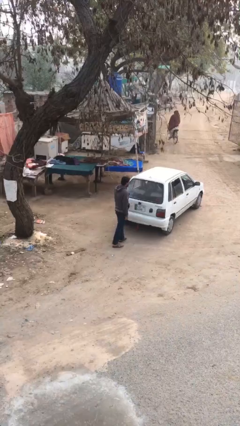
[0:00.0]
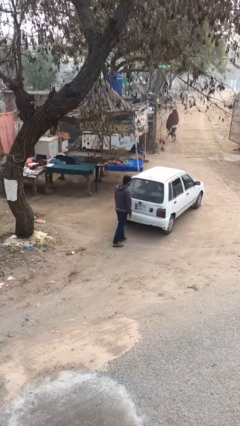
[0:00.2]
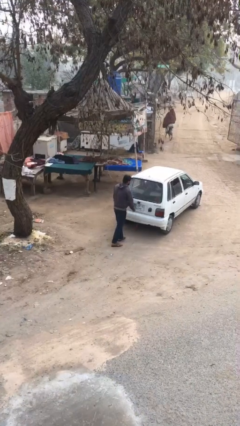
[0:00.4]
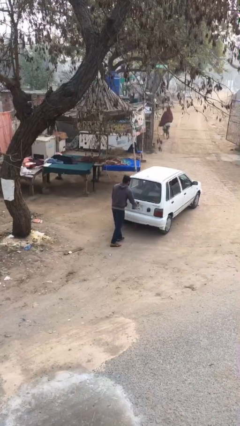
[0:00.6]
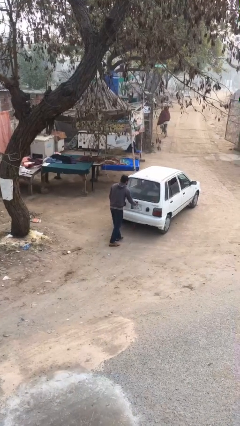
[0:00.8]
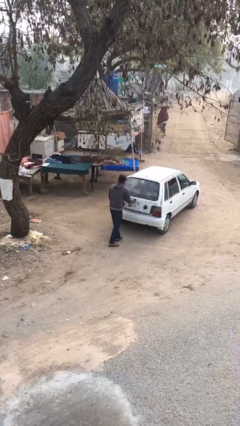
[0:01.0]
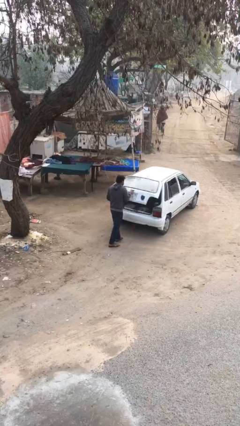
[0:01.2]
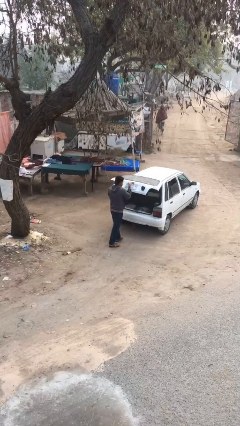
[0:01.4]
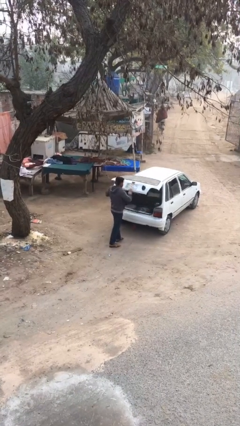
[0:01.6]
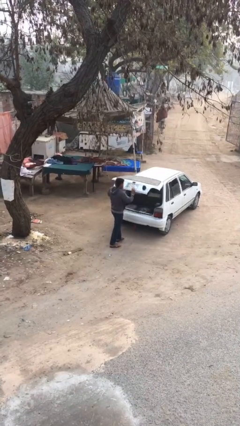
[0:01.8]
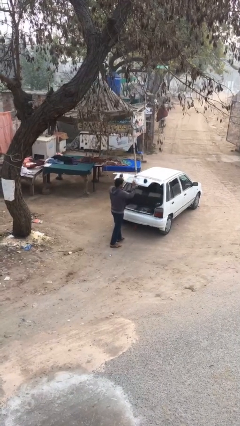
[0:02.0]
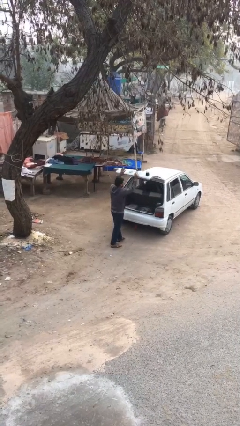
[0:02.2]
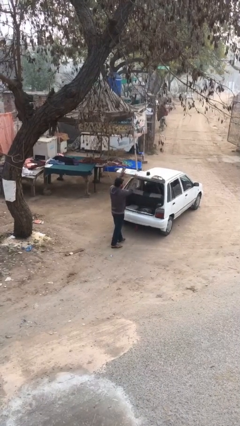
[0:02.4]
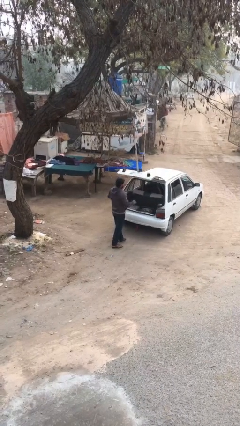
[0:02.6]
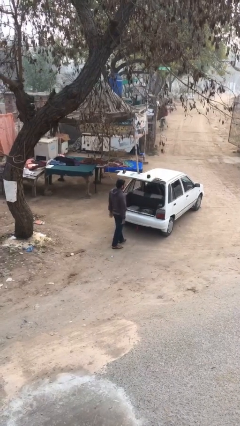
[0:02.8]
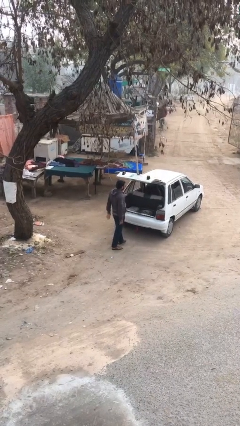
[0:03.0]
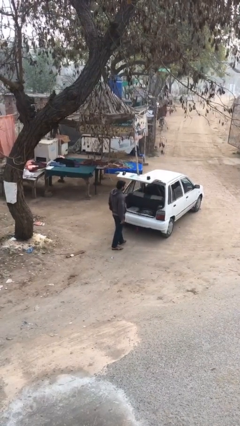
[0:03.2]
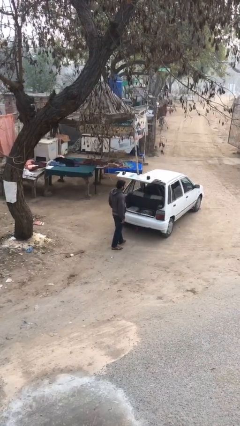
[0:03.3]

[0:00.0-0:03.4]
person opens car trunk

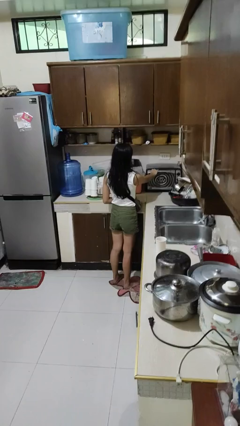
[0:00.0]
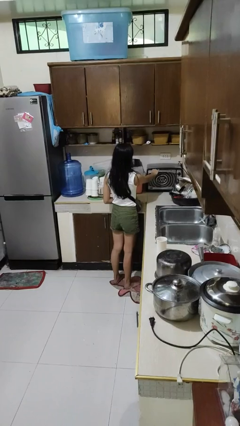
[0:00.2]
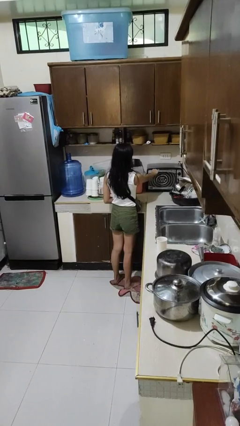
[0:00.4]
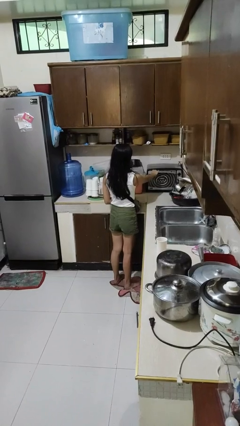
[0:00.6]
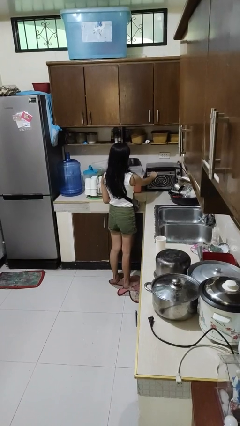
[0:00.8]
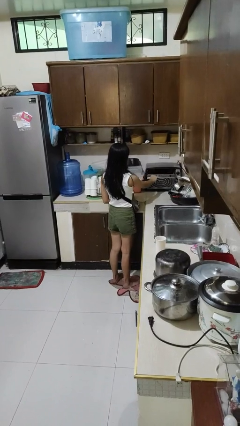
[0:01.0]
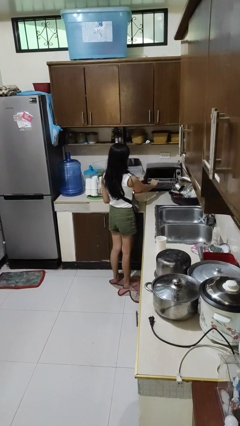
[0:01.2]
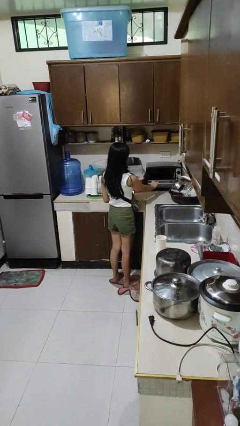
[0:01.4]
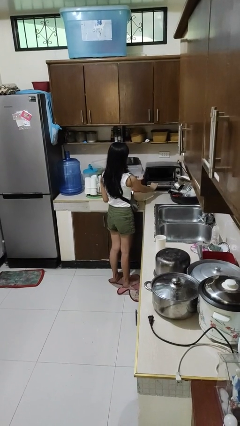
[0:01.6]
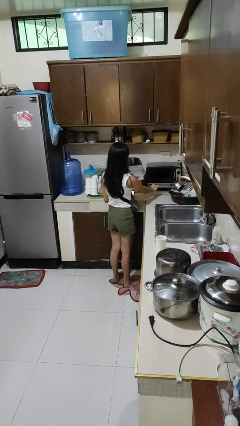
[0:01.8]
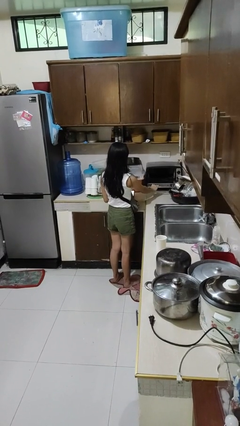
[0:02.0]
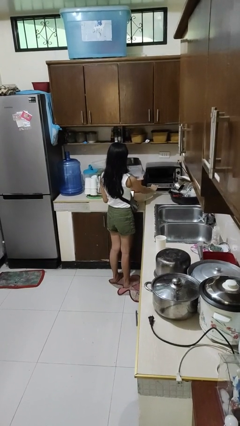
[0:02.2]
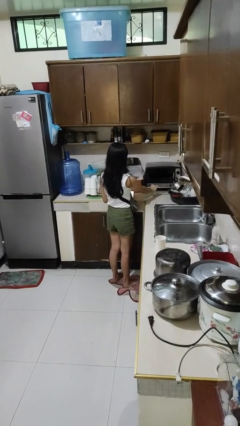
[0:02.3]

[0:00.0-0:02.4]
person opens microwave

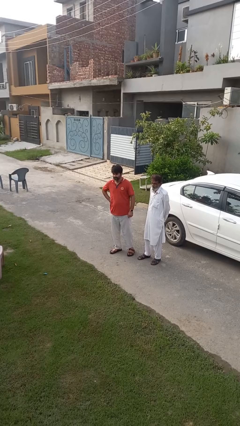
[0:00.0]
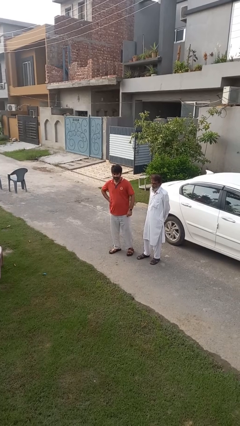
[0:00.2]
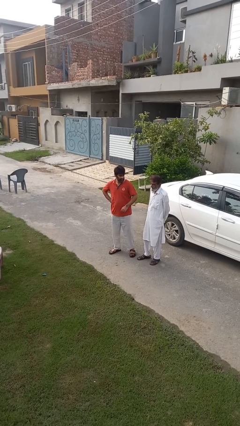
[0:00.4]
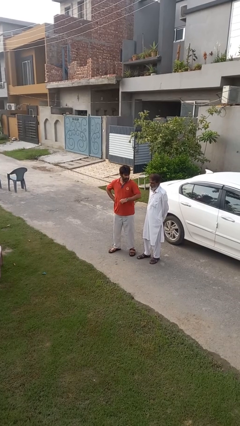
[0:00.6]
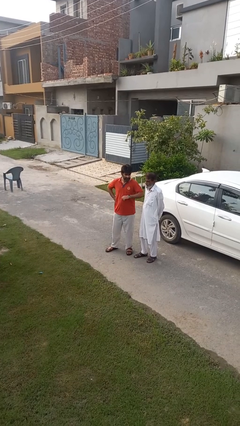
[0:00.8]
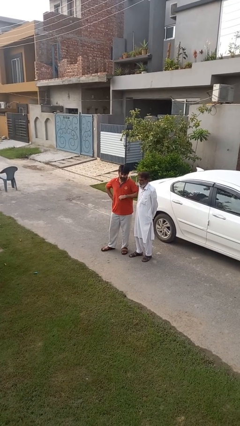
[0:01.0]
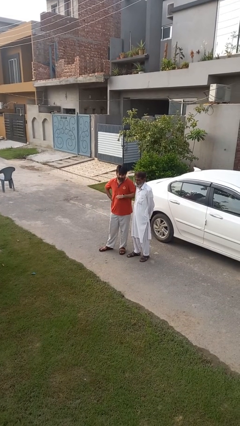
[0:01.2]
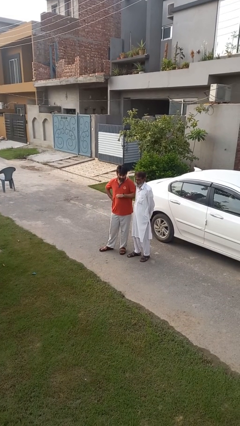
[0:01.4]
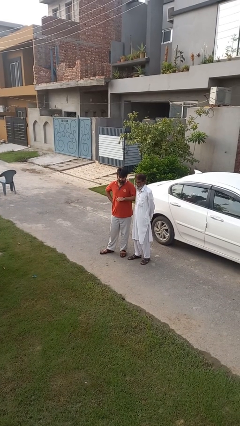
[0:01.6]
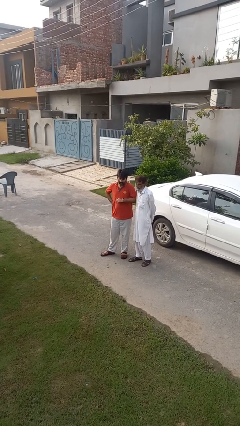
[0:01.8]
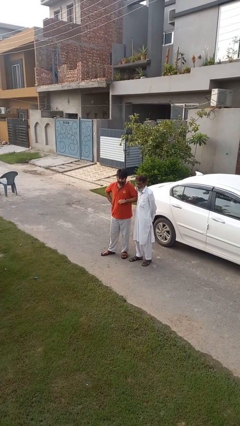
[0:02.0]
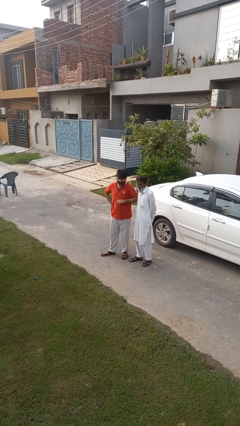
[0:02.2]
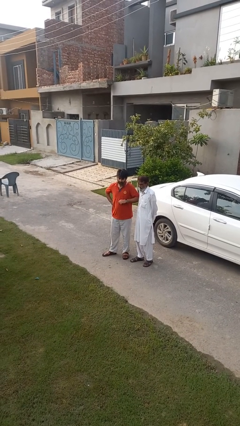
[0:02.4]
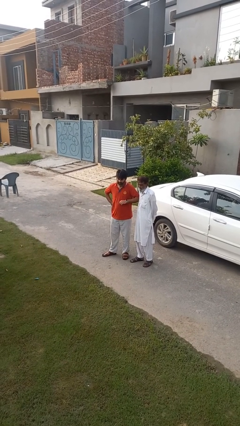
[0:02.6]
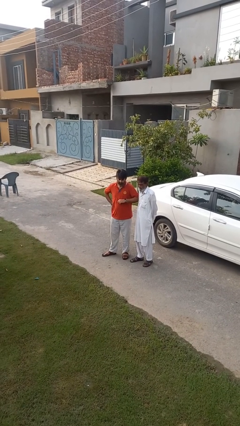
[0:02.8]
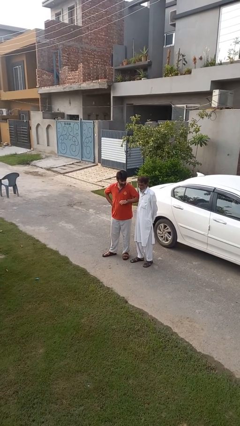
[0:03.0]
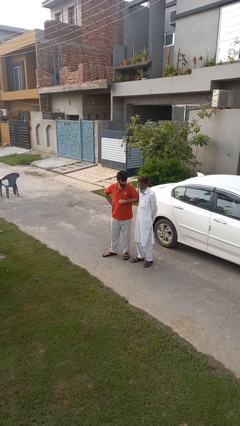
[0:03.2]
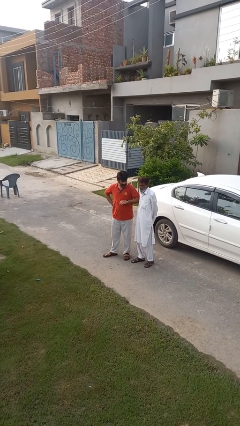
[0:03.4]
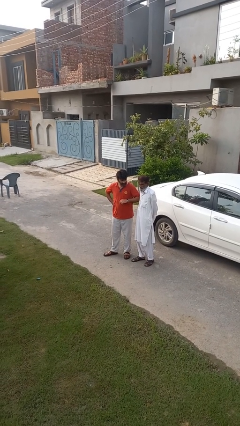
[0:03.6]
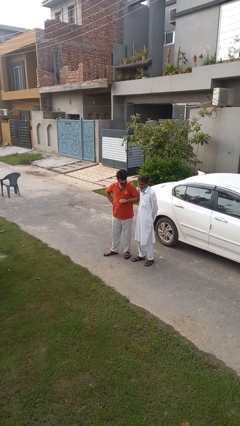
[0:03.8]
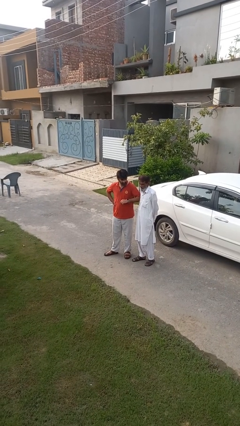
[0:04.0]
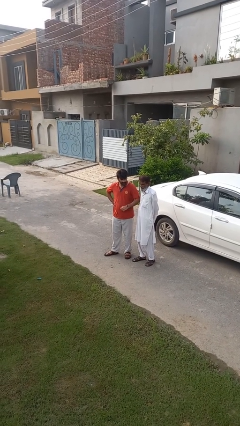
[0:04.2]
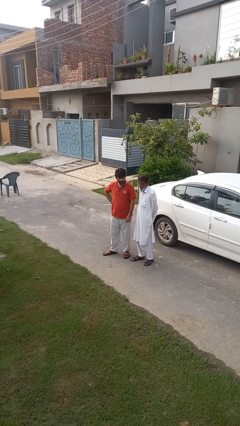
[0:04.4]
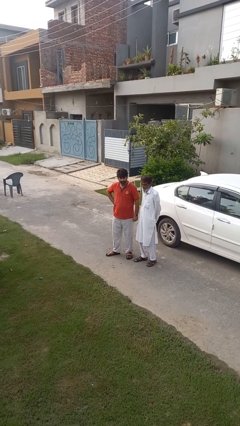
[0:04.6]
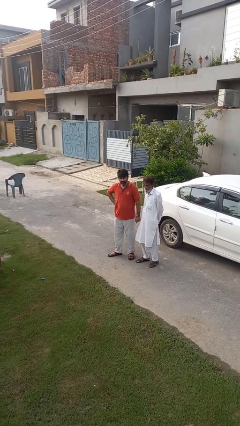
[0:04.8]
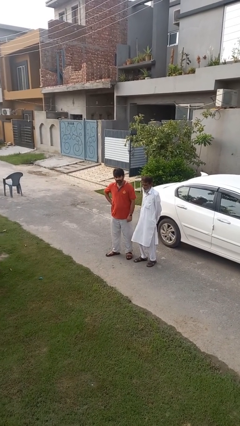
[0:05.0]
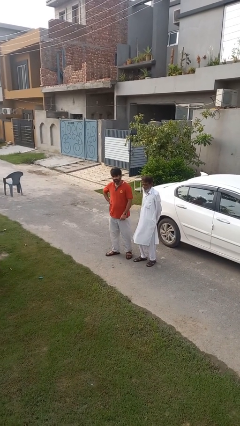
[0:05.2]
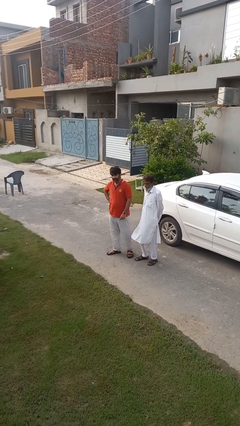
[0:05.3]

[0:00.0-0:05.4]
person nudges person with elbow

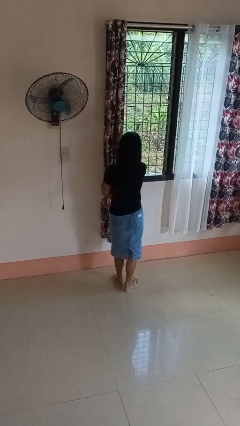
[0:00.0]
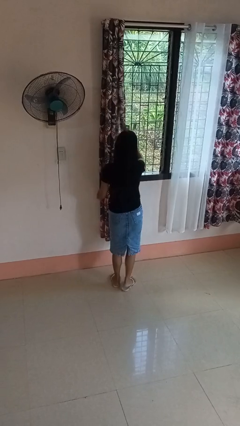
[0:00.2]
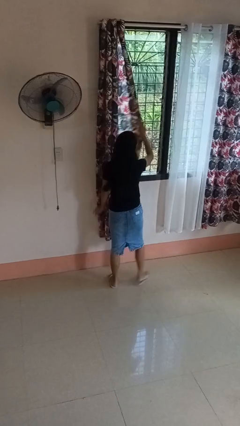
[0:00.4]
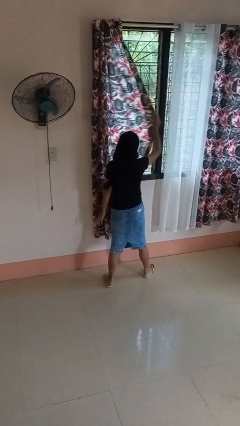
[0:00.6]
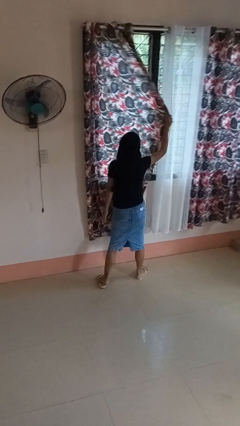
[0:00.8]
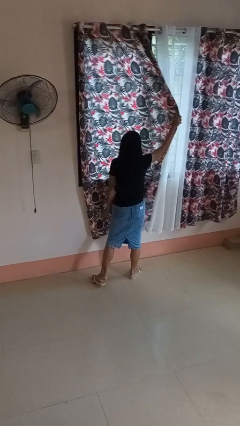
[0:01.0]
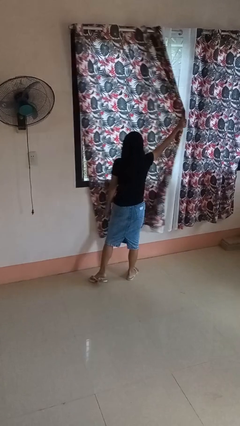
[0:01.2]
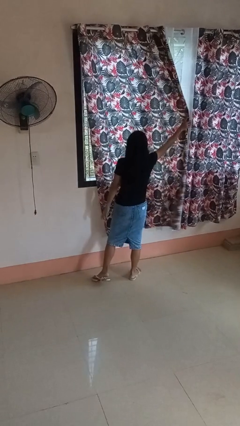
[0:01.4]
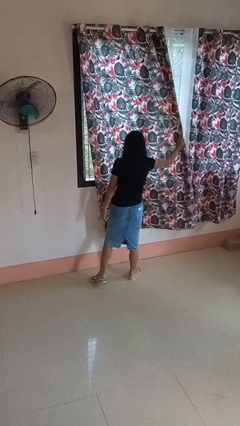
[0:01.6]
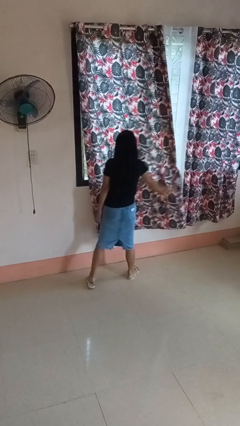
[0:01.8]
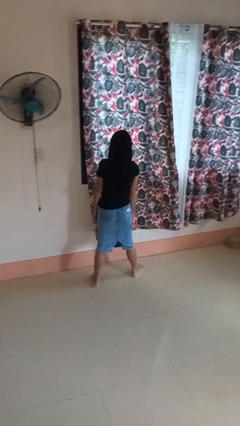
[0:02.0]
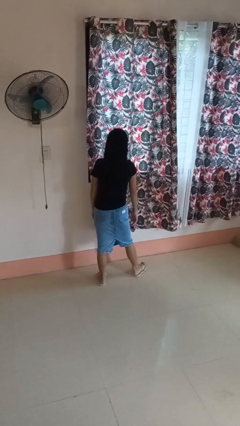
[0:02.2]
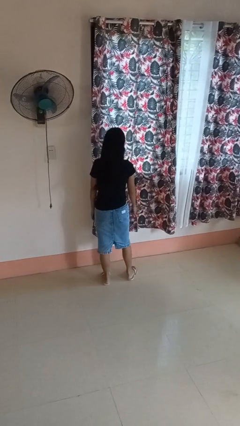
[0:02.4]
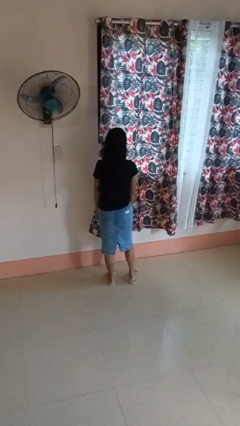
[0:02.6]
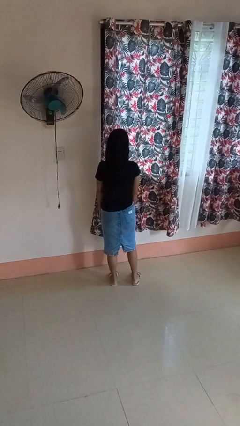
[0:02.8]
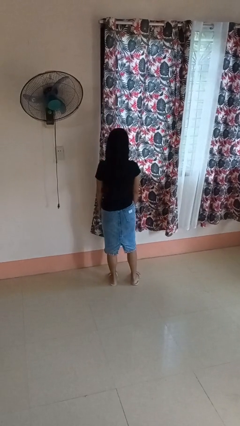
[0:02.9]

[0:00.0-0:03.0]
person closes curtains

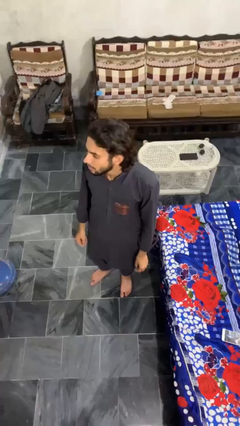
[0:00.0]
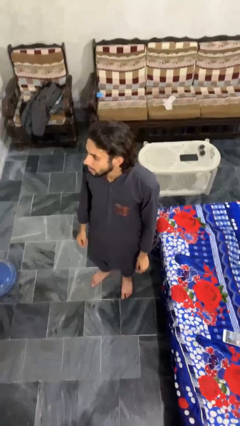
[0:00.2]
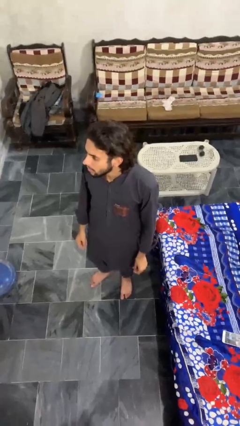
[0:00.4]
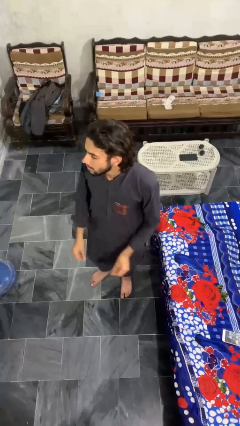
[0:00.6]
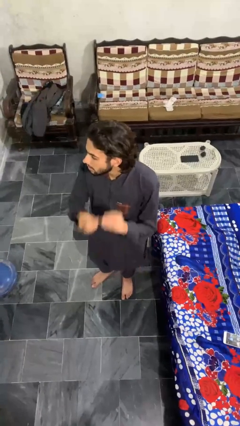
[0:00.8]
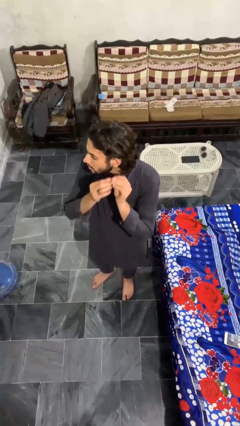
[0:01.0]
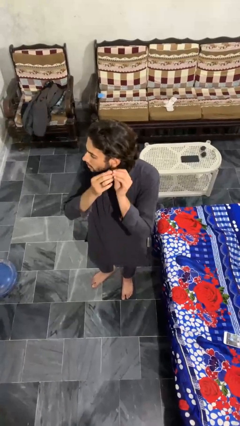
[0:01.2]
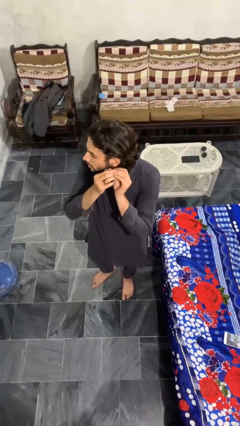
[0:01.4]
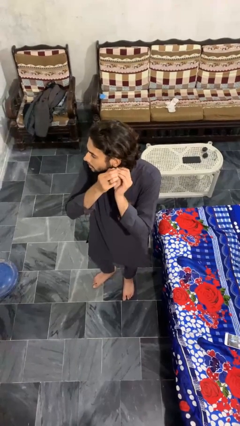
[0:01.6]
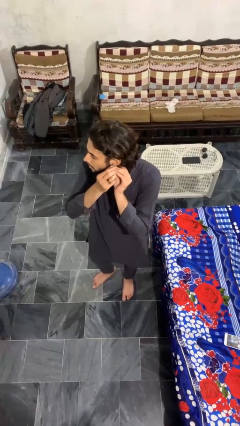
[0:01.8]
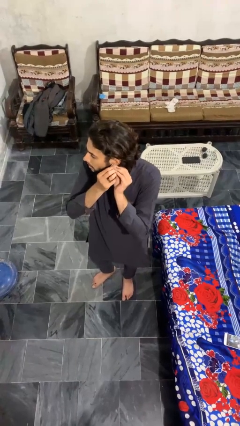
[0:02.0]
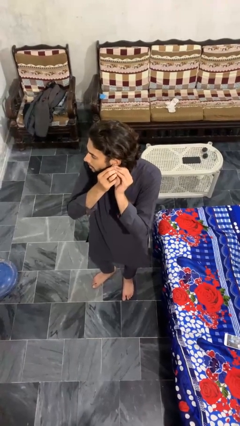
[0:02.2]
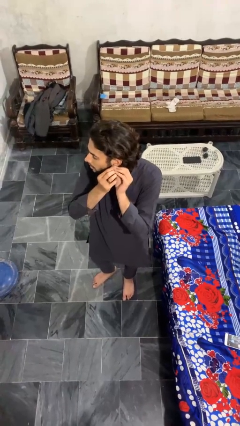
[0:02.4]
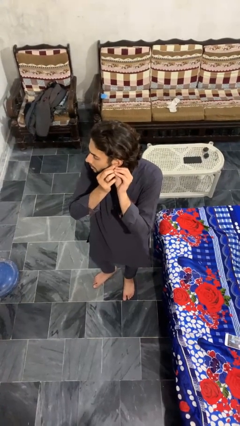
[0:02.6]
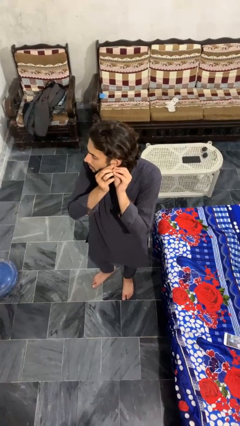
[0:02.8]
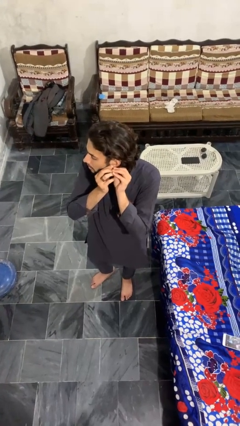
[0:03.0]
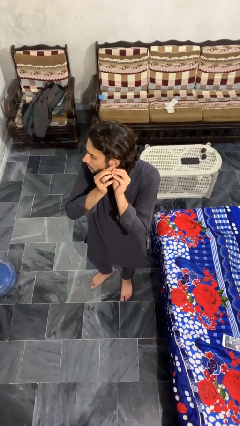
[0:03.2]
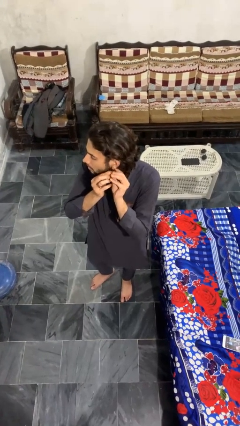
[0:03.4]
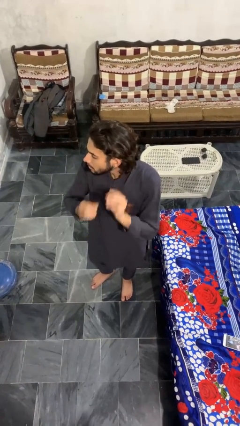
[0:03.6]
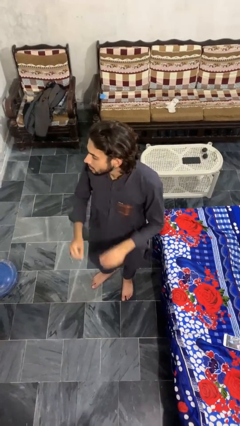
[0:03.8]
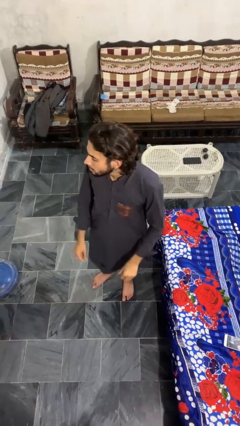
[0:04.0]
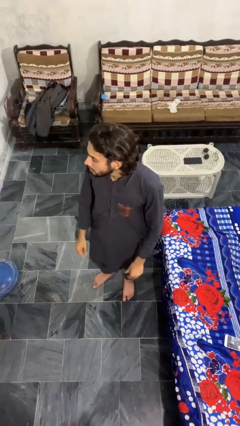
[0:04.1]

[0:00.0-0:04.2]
person puts on earrings
